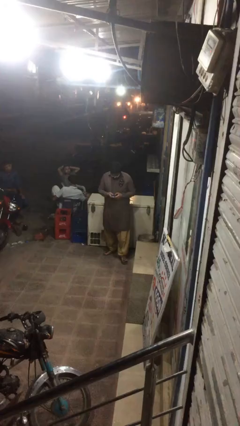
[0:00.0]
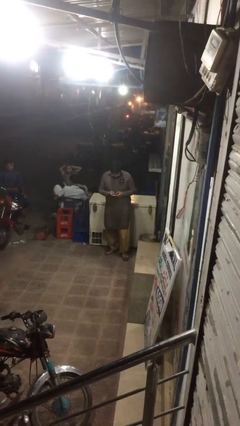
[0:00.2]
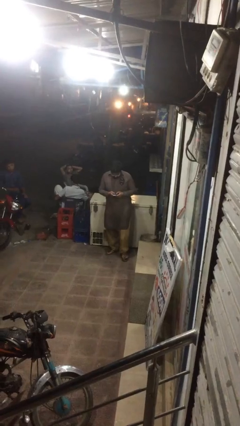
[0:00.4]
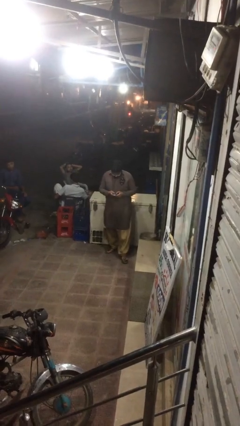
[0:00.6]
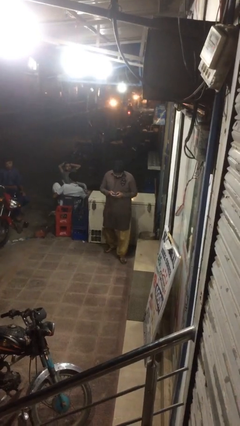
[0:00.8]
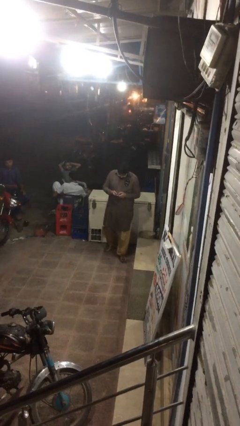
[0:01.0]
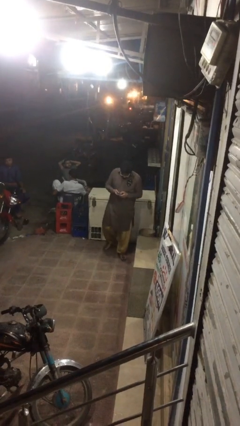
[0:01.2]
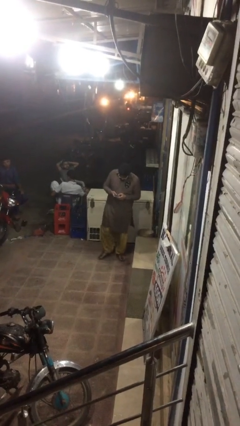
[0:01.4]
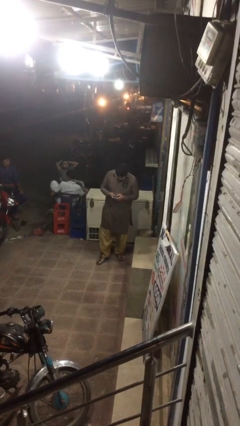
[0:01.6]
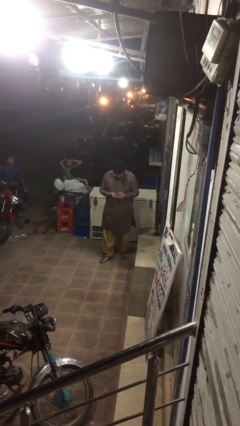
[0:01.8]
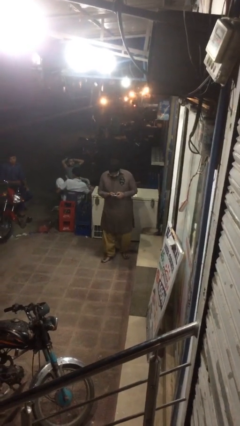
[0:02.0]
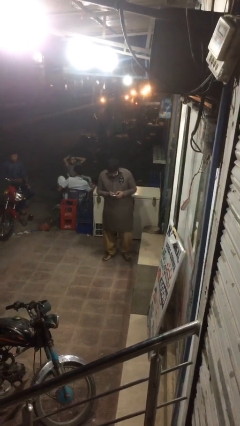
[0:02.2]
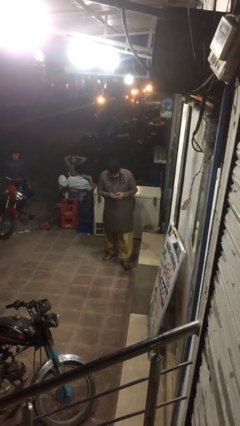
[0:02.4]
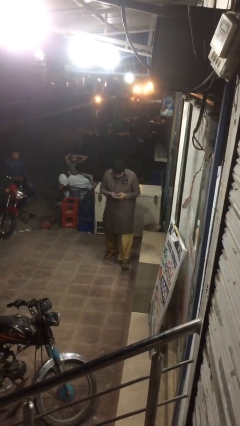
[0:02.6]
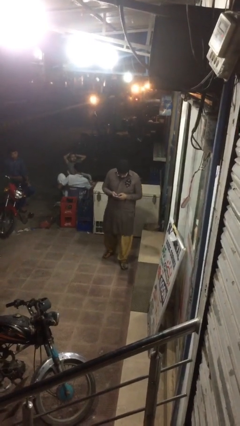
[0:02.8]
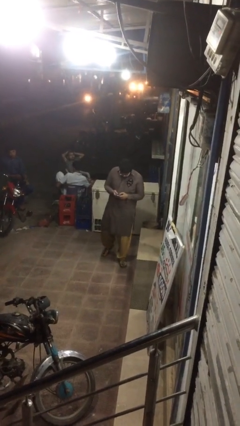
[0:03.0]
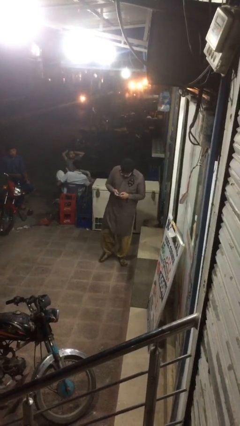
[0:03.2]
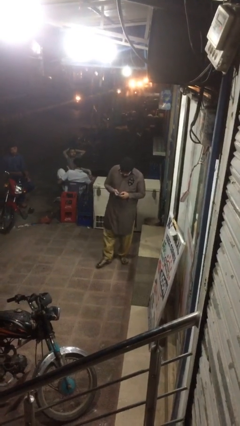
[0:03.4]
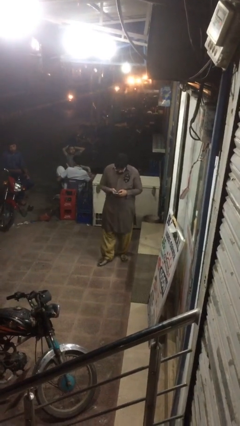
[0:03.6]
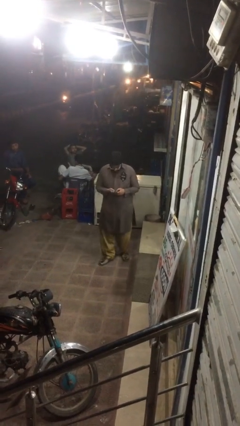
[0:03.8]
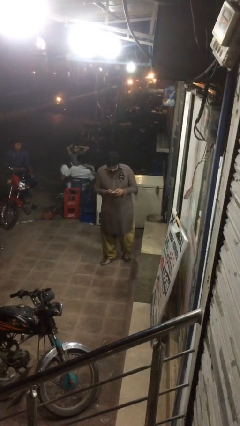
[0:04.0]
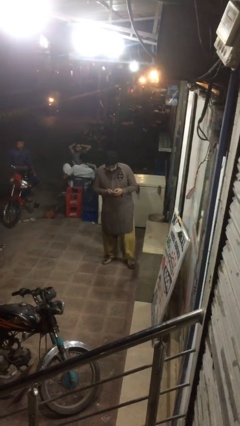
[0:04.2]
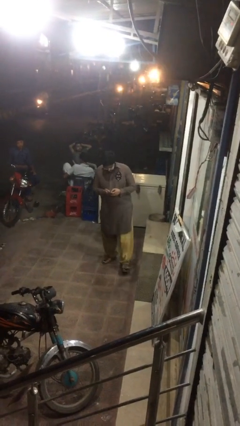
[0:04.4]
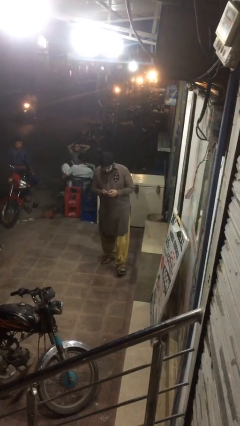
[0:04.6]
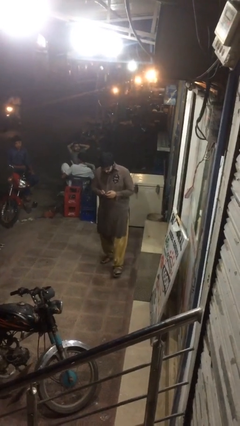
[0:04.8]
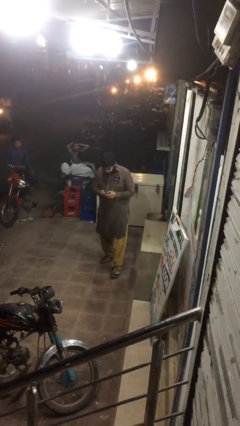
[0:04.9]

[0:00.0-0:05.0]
person texts on phone

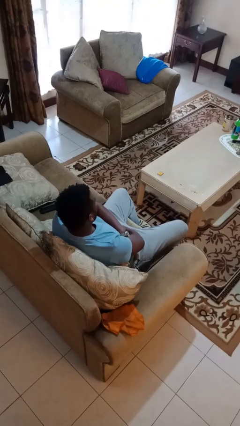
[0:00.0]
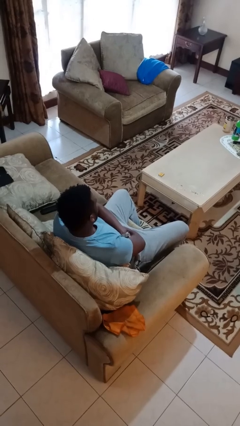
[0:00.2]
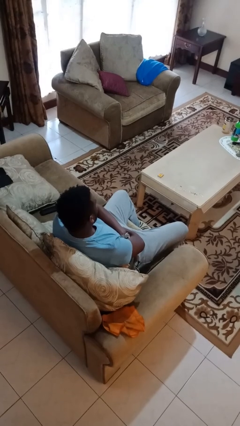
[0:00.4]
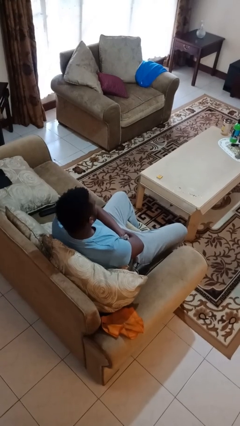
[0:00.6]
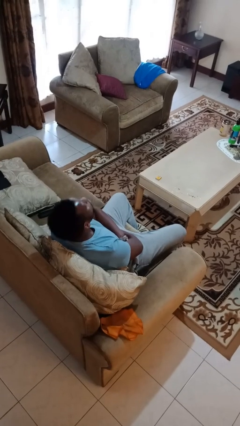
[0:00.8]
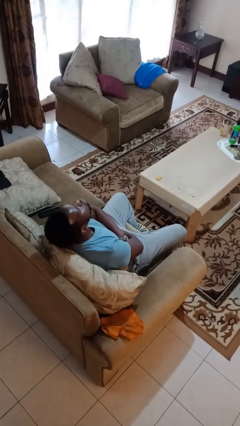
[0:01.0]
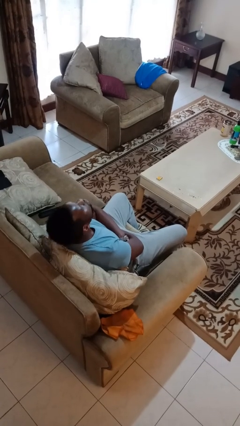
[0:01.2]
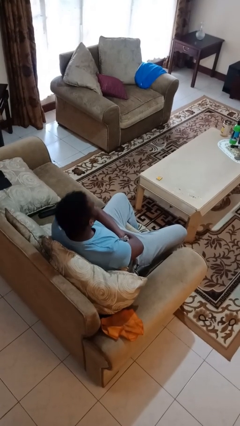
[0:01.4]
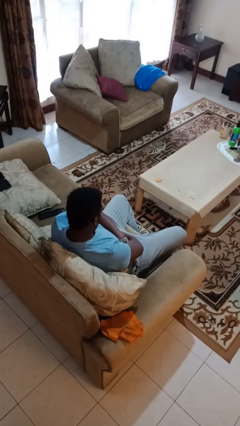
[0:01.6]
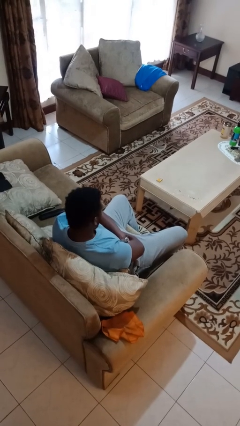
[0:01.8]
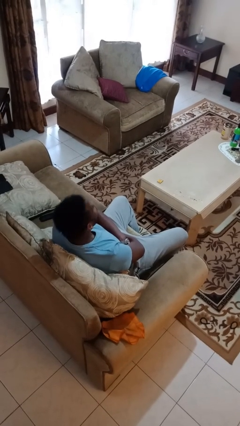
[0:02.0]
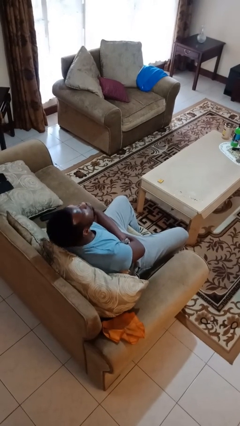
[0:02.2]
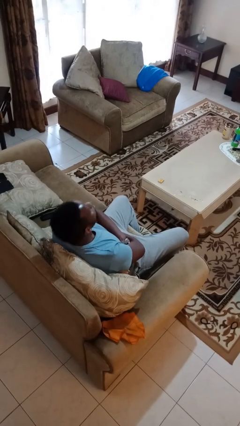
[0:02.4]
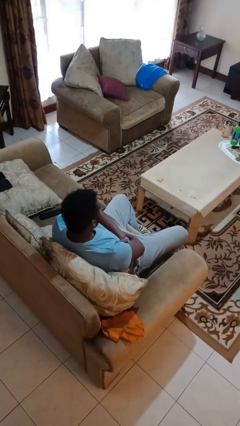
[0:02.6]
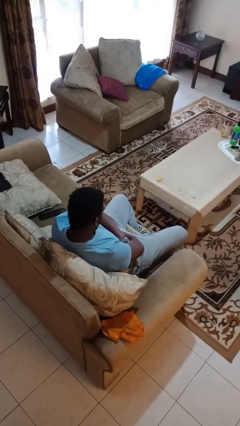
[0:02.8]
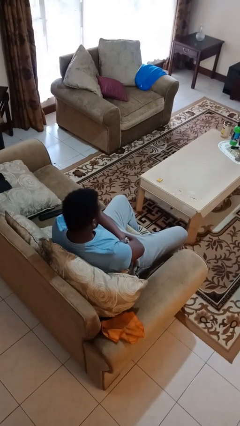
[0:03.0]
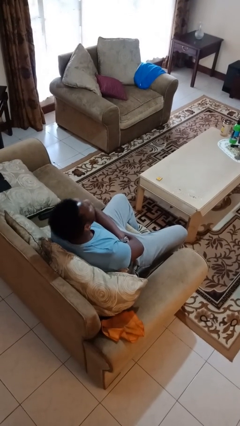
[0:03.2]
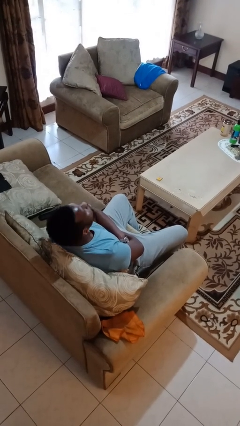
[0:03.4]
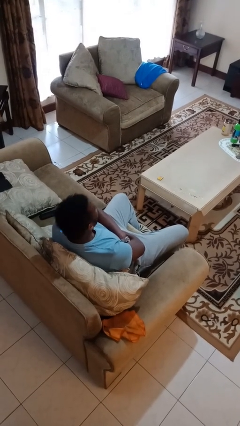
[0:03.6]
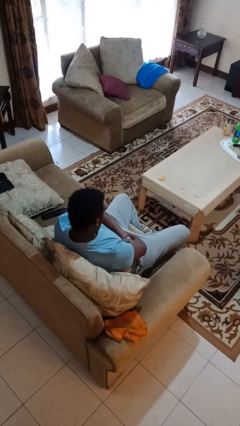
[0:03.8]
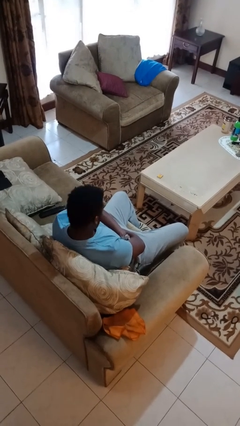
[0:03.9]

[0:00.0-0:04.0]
person nods head

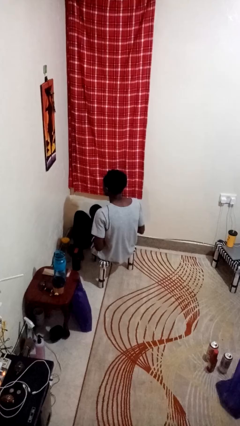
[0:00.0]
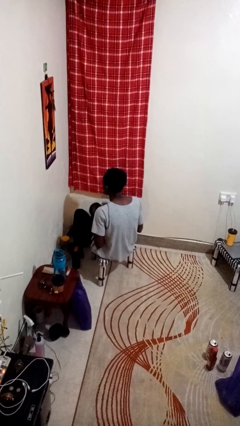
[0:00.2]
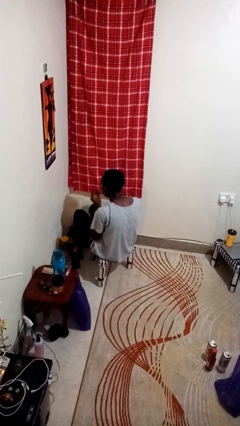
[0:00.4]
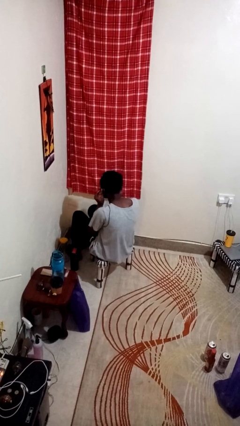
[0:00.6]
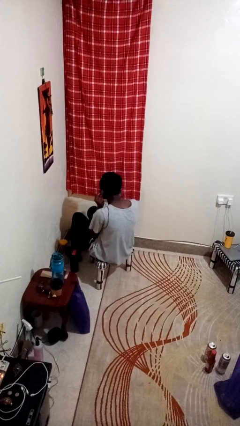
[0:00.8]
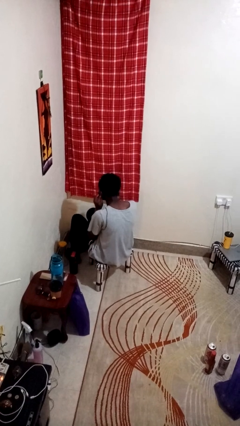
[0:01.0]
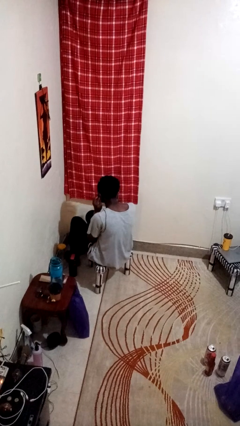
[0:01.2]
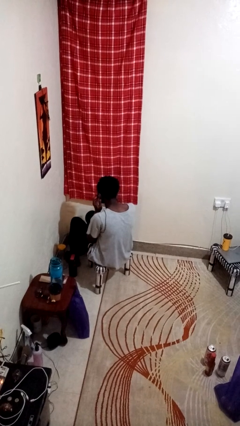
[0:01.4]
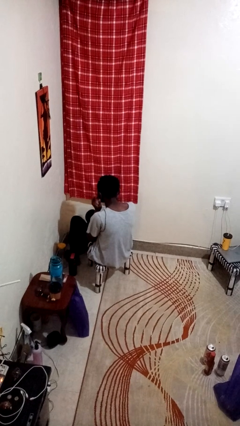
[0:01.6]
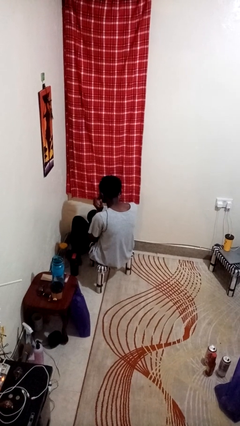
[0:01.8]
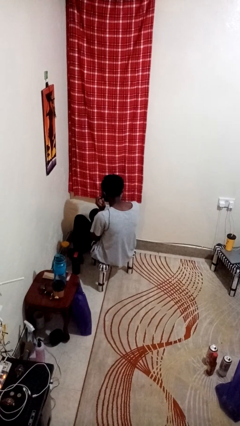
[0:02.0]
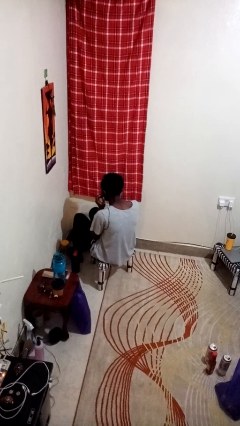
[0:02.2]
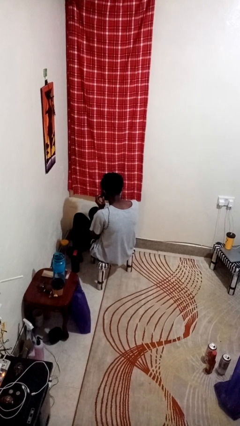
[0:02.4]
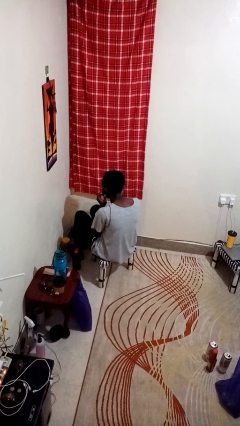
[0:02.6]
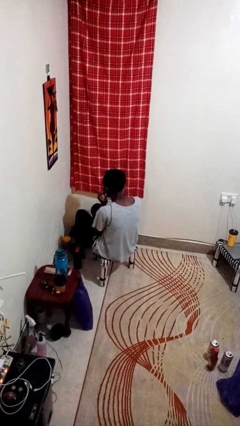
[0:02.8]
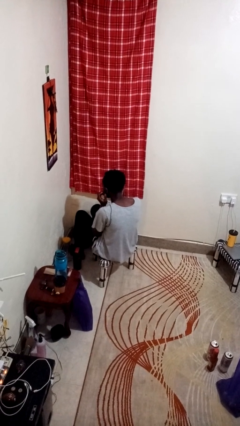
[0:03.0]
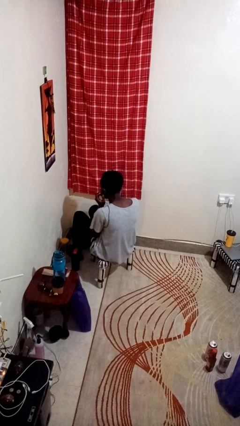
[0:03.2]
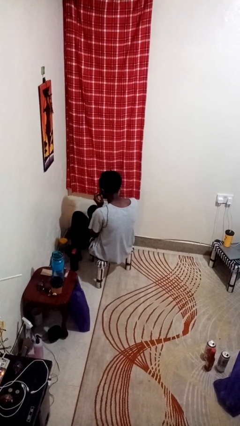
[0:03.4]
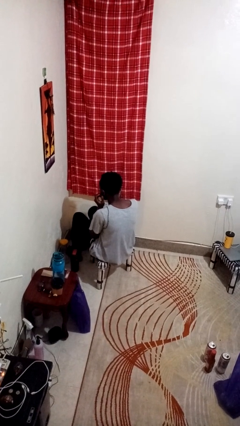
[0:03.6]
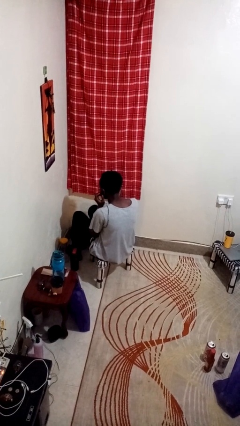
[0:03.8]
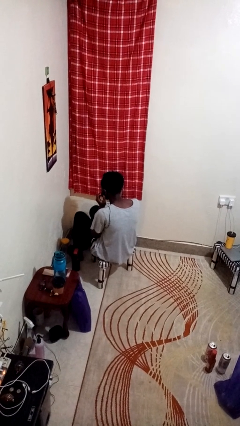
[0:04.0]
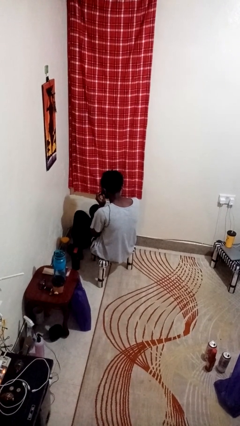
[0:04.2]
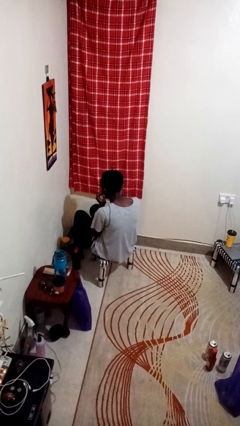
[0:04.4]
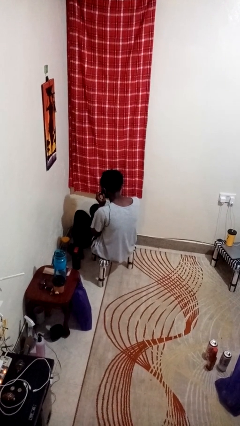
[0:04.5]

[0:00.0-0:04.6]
person puts on headphones

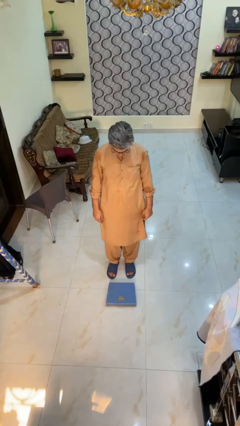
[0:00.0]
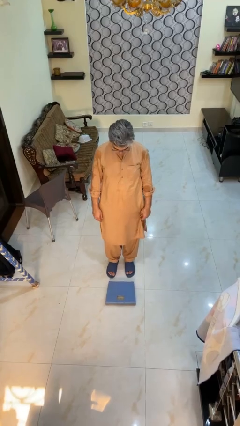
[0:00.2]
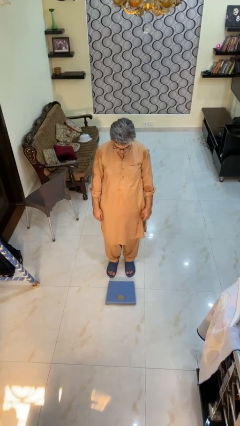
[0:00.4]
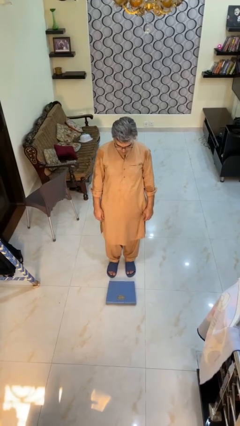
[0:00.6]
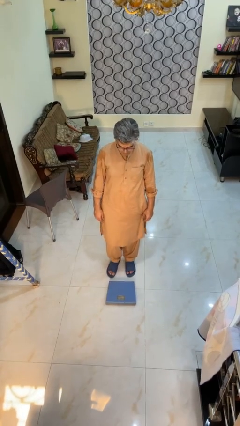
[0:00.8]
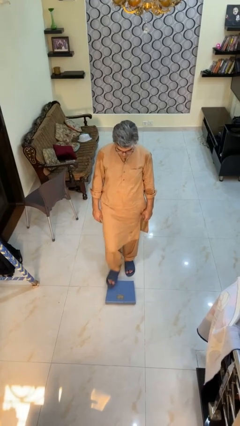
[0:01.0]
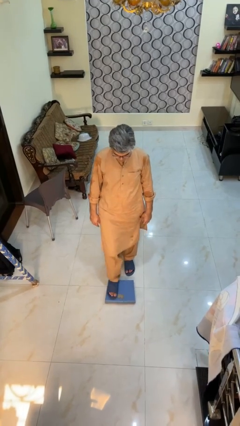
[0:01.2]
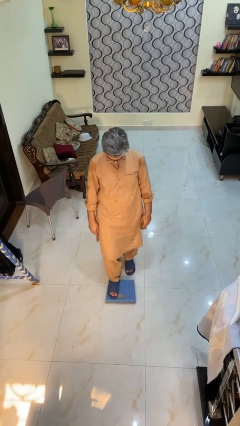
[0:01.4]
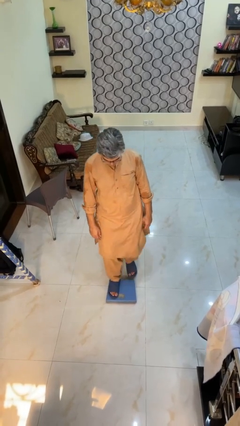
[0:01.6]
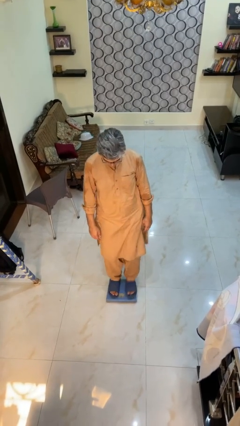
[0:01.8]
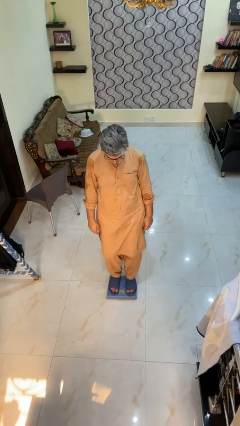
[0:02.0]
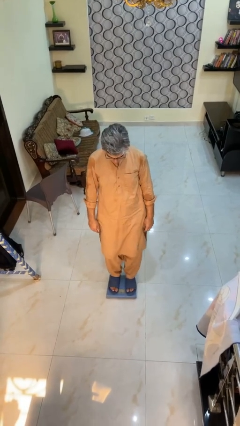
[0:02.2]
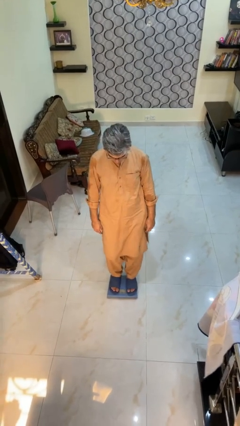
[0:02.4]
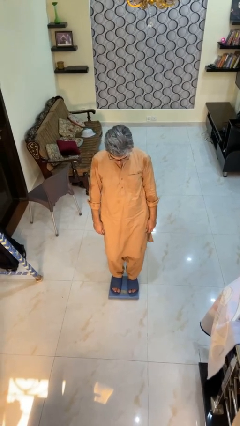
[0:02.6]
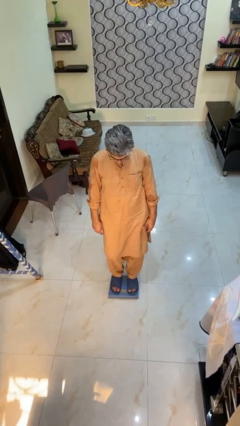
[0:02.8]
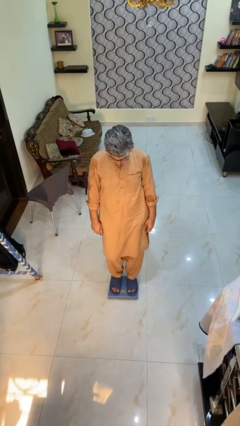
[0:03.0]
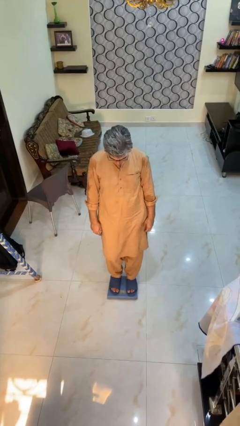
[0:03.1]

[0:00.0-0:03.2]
person uses bodyweight scale

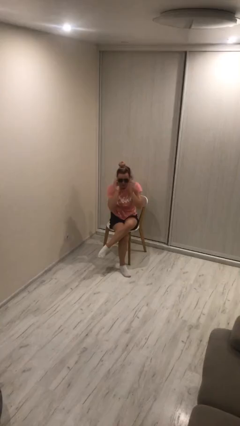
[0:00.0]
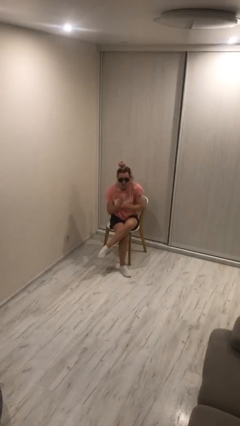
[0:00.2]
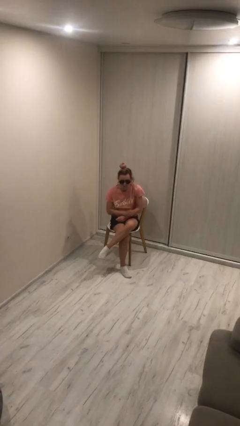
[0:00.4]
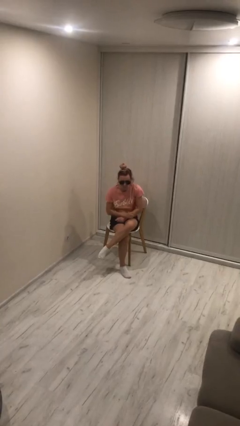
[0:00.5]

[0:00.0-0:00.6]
person puts on sunglasses
